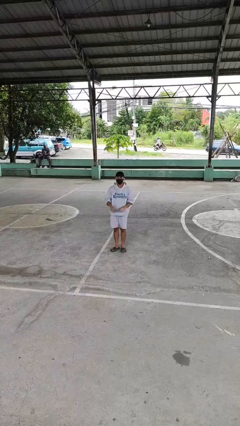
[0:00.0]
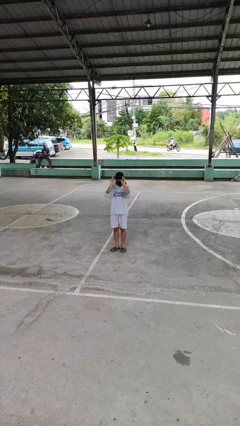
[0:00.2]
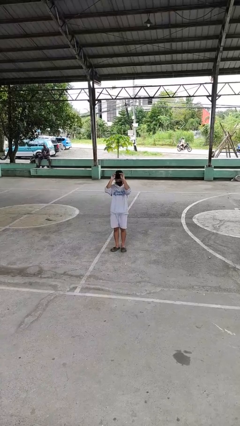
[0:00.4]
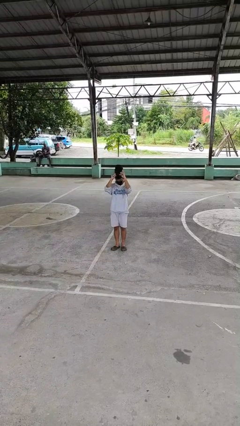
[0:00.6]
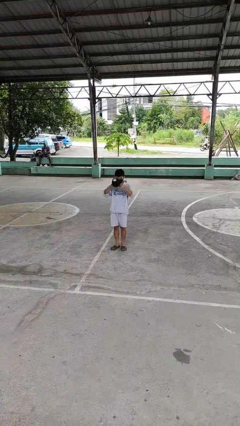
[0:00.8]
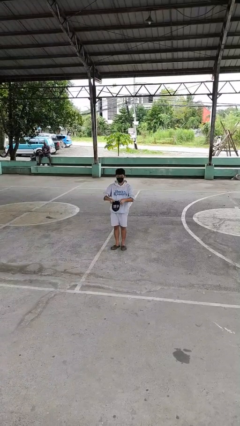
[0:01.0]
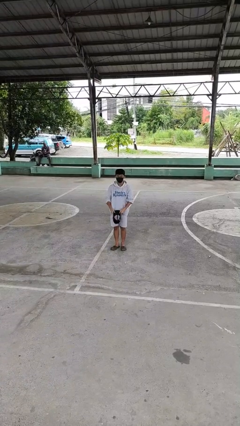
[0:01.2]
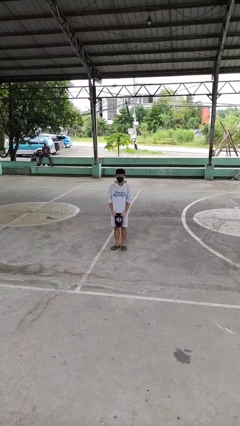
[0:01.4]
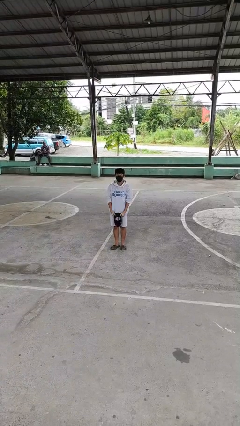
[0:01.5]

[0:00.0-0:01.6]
person takes off hat

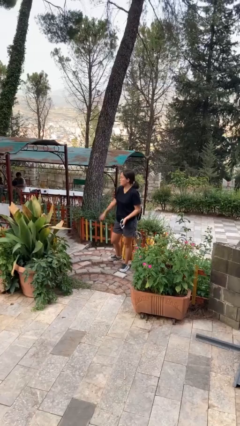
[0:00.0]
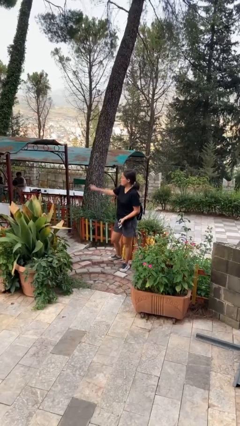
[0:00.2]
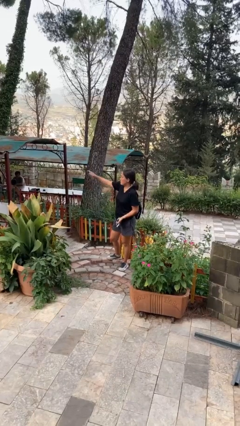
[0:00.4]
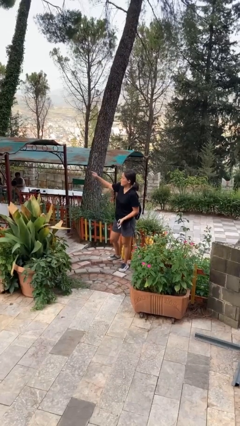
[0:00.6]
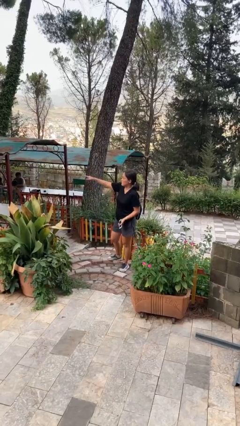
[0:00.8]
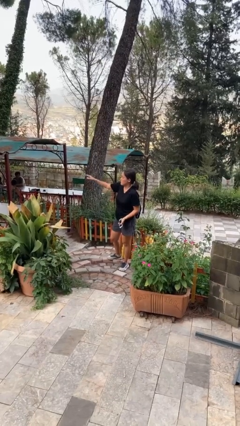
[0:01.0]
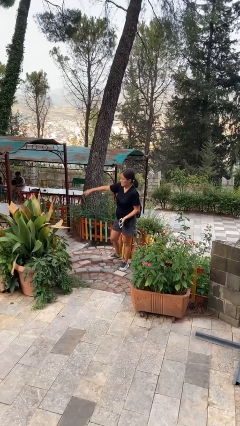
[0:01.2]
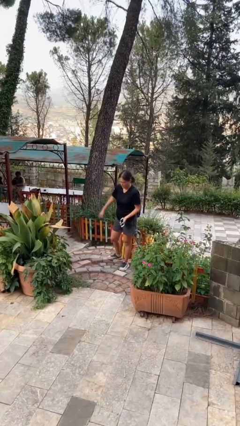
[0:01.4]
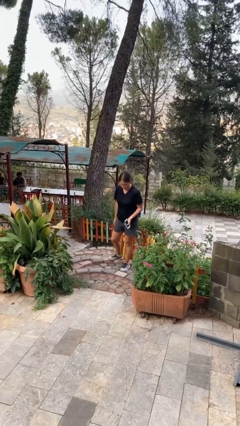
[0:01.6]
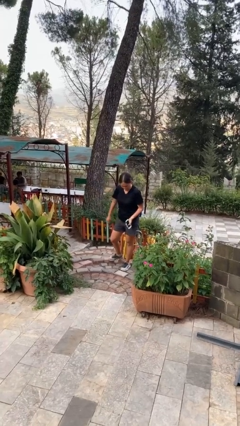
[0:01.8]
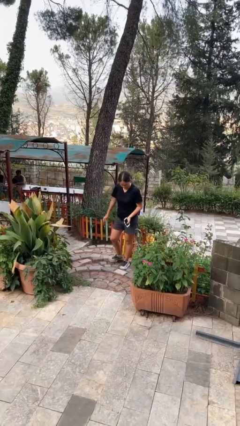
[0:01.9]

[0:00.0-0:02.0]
person points at person

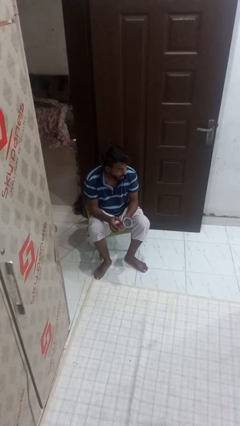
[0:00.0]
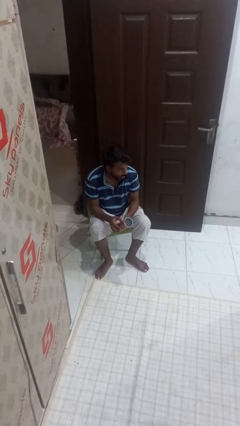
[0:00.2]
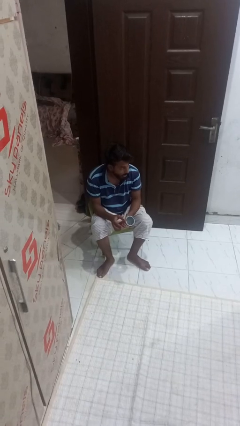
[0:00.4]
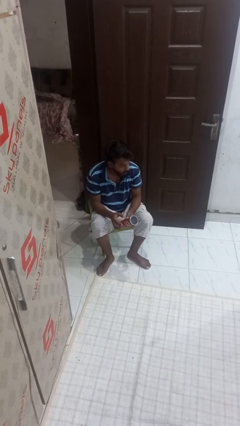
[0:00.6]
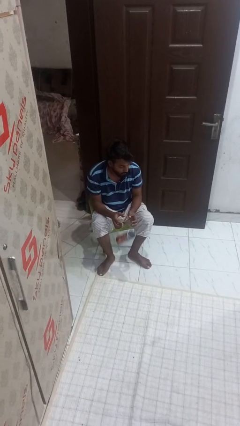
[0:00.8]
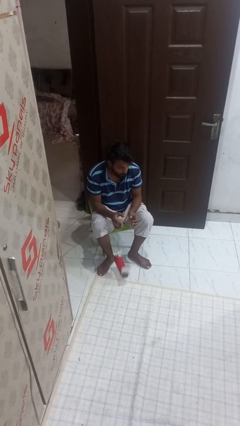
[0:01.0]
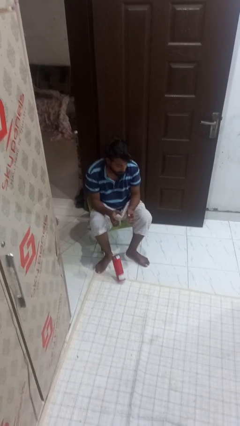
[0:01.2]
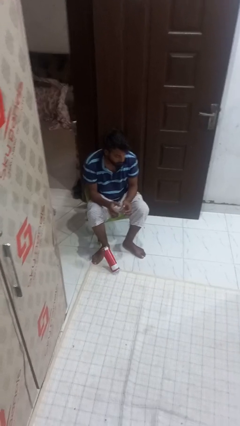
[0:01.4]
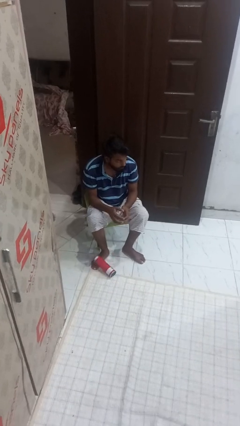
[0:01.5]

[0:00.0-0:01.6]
person drops object

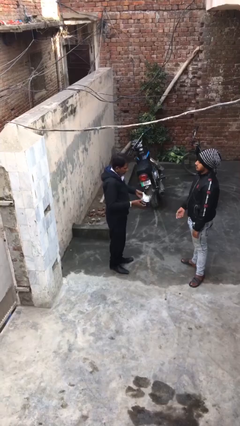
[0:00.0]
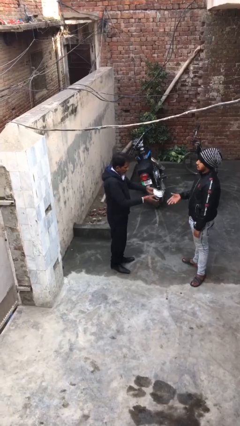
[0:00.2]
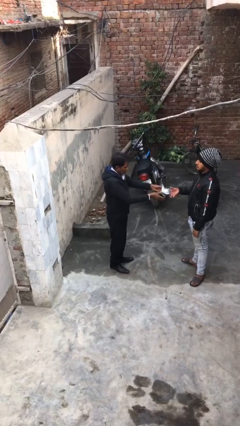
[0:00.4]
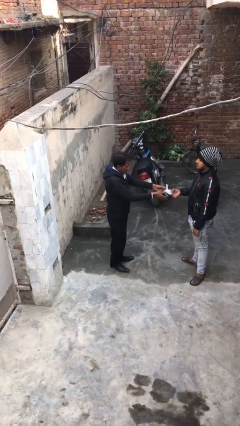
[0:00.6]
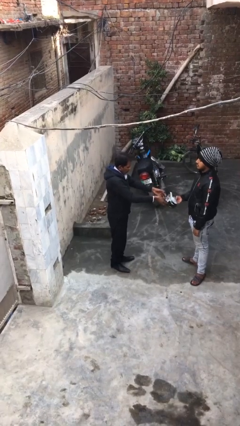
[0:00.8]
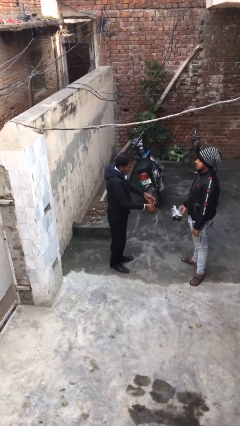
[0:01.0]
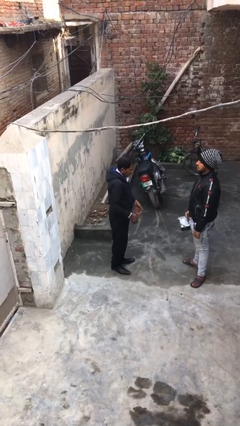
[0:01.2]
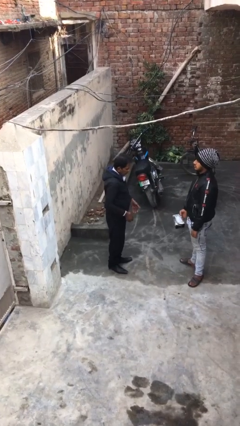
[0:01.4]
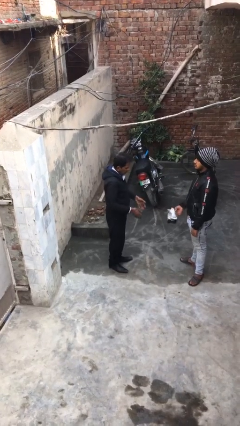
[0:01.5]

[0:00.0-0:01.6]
person transfers object to person

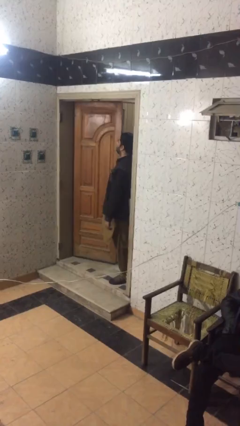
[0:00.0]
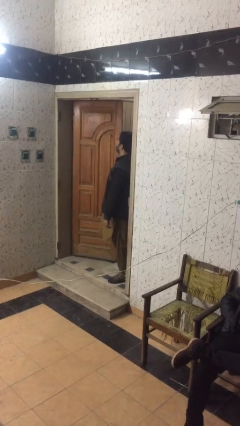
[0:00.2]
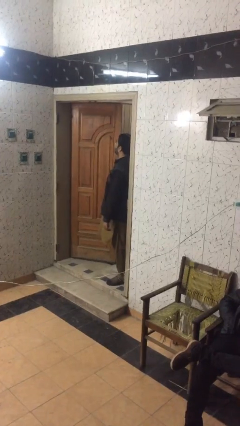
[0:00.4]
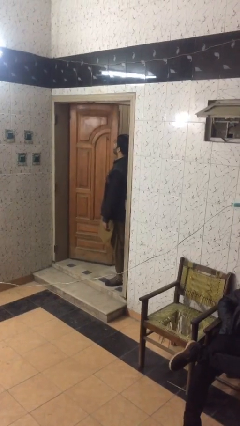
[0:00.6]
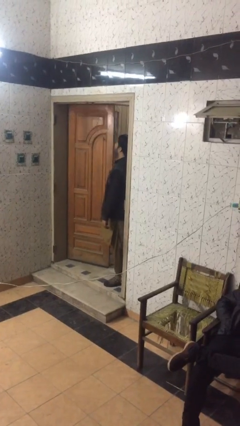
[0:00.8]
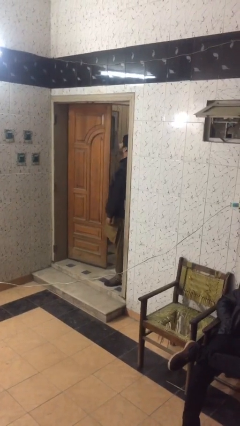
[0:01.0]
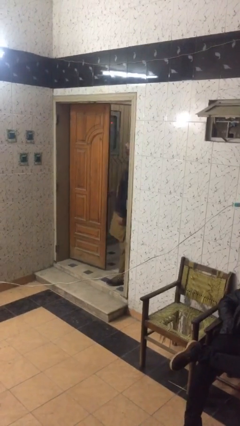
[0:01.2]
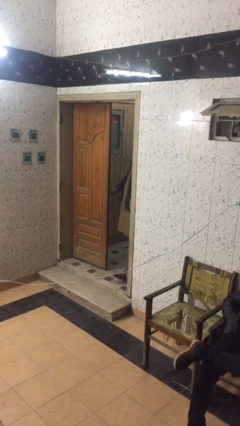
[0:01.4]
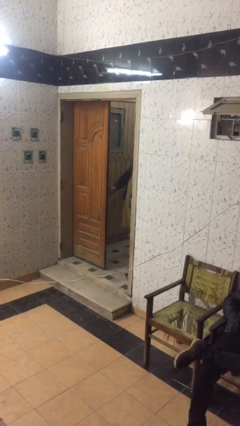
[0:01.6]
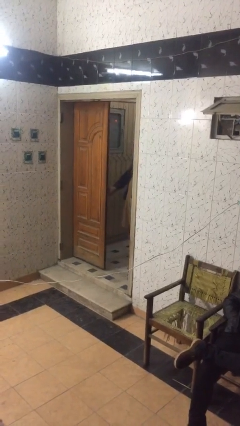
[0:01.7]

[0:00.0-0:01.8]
person closes facility door

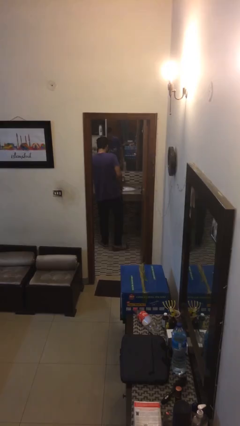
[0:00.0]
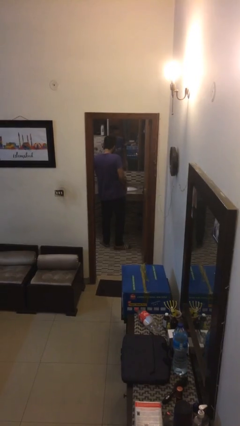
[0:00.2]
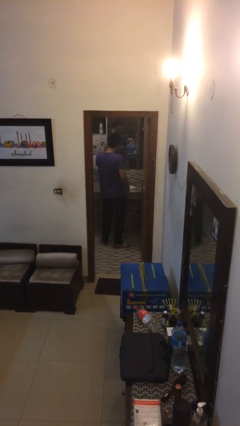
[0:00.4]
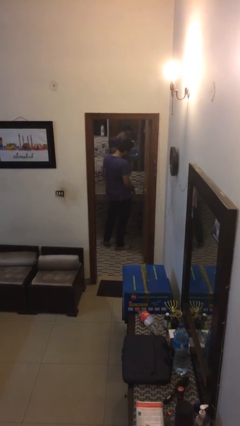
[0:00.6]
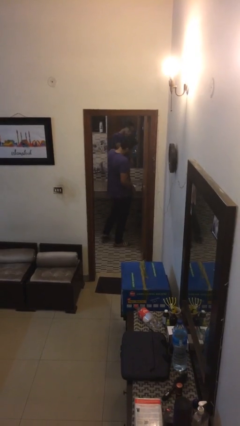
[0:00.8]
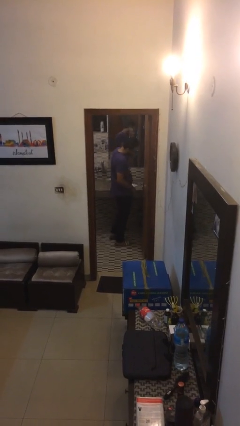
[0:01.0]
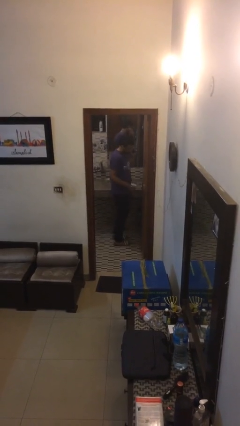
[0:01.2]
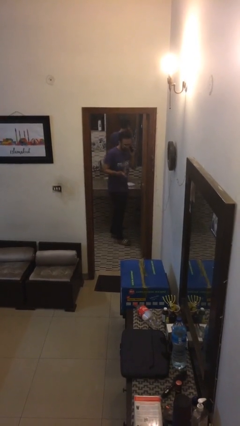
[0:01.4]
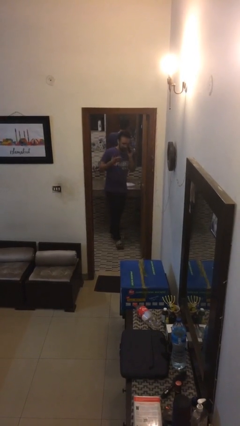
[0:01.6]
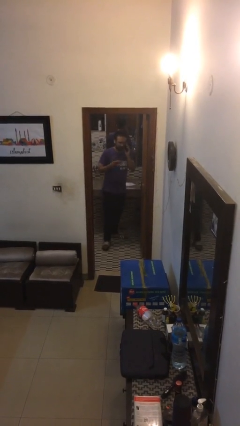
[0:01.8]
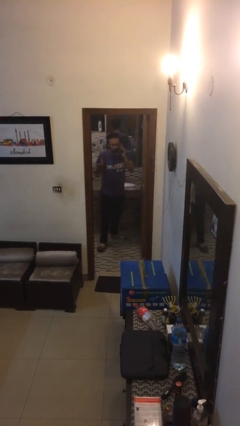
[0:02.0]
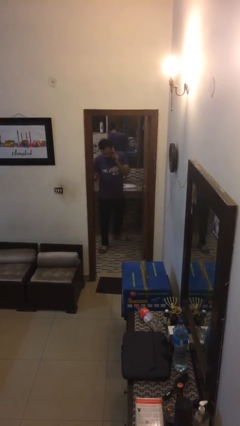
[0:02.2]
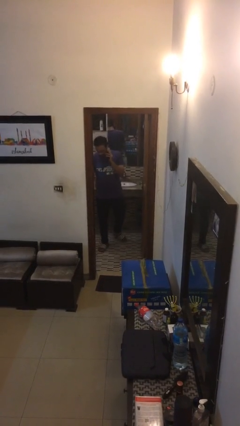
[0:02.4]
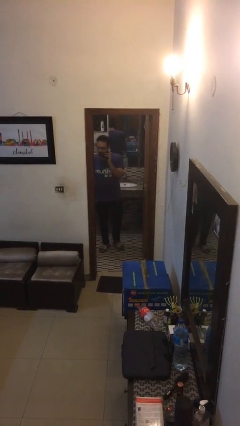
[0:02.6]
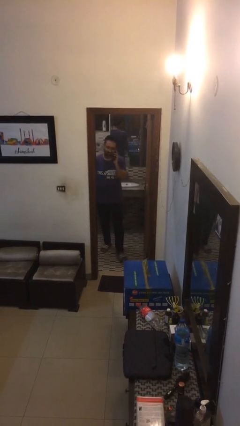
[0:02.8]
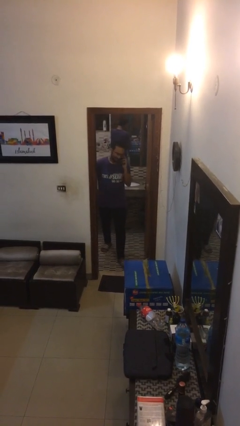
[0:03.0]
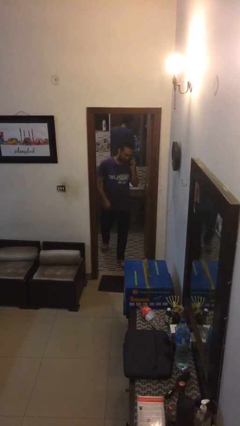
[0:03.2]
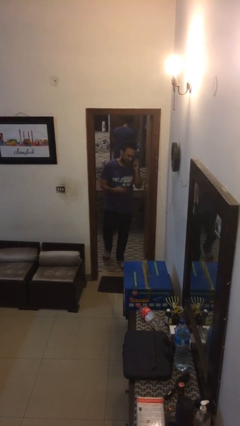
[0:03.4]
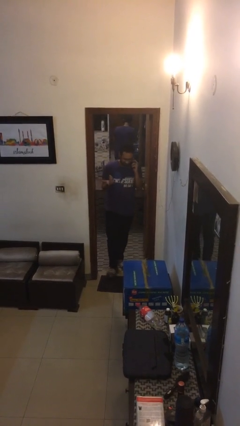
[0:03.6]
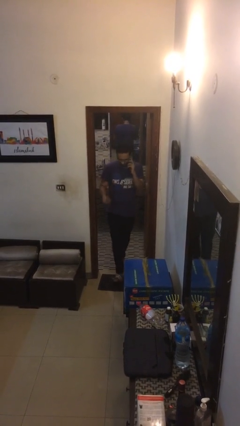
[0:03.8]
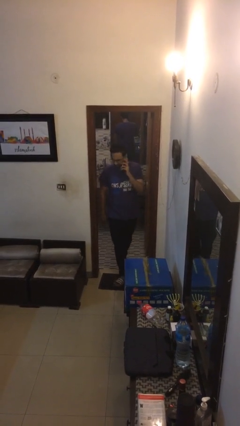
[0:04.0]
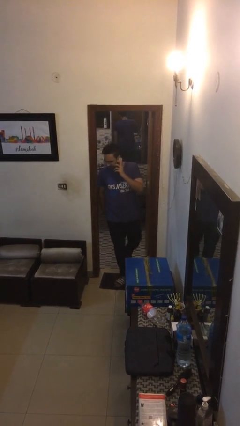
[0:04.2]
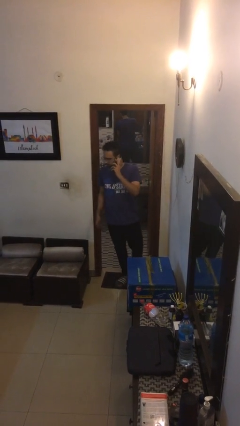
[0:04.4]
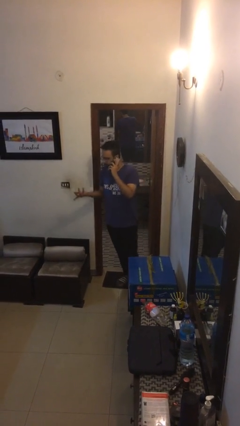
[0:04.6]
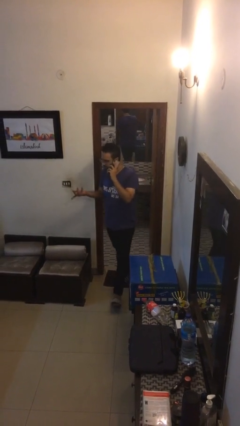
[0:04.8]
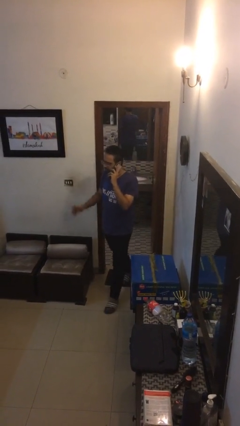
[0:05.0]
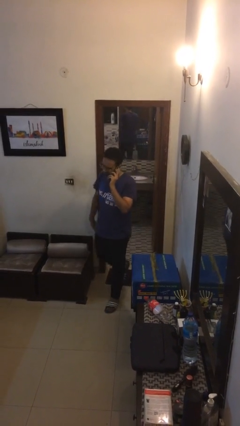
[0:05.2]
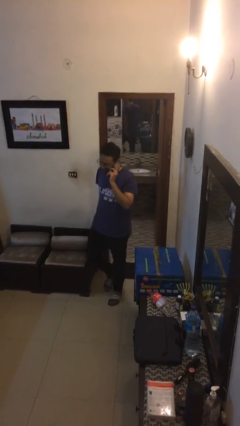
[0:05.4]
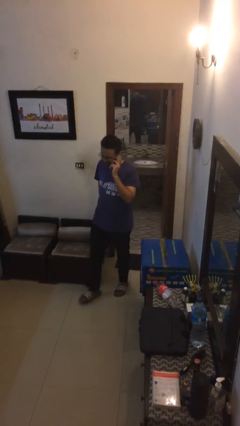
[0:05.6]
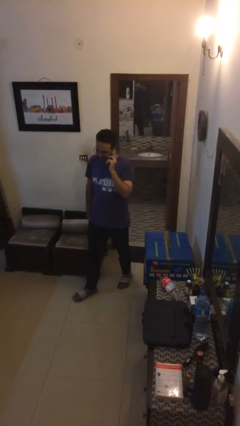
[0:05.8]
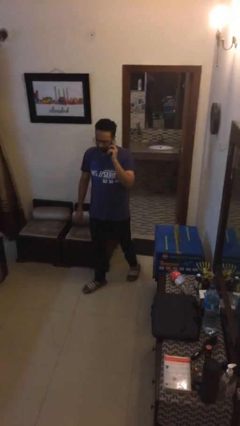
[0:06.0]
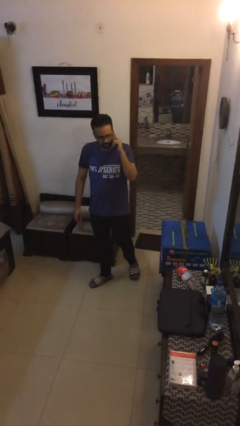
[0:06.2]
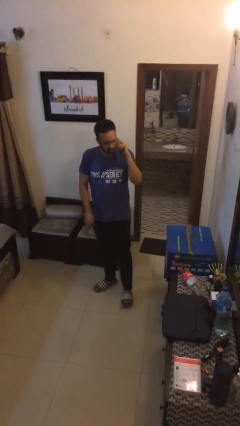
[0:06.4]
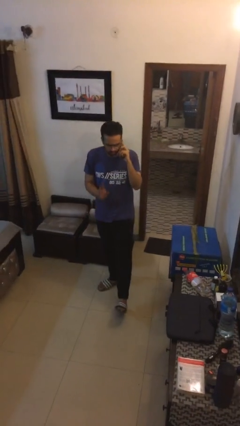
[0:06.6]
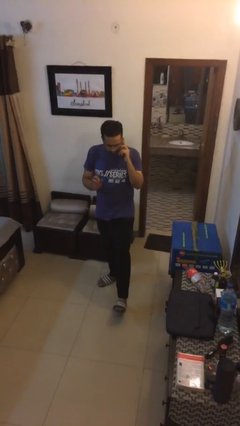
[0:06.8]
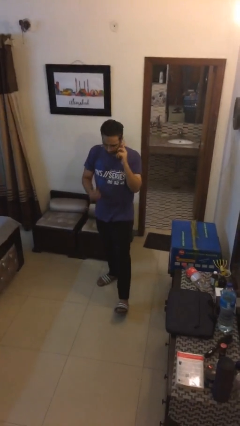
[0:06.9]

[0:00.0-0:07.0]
person enters scene through structure

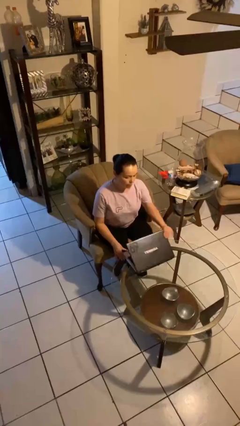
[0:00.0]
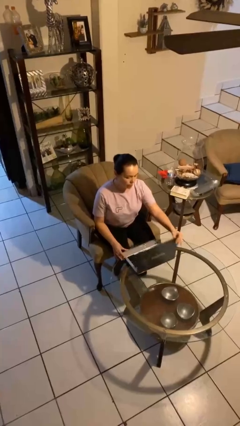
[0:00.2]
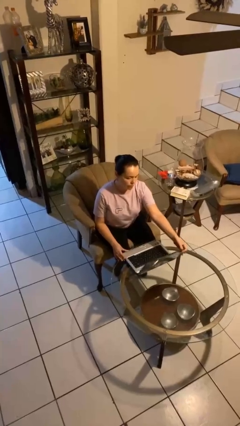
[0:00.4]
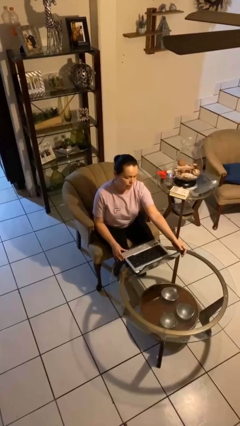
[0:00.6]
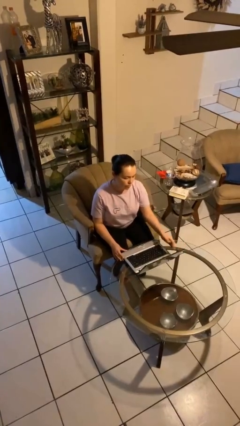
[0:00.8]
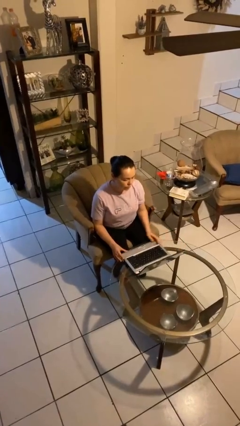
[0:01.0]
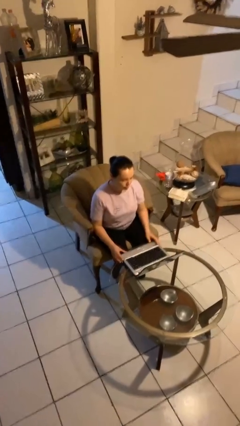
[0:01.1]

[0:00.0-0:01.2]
person opens laptop

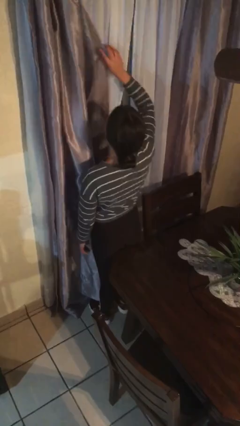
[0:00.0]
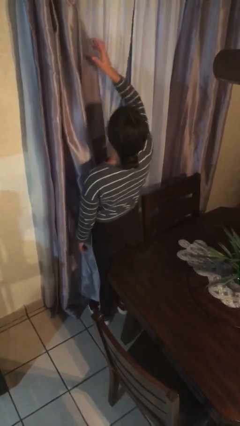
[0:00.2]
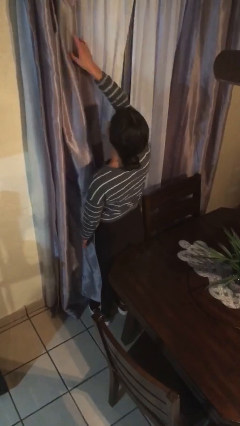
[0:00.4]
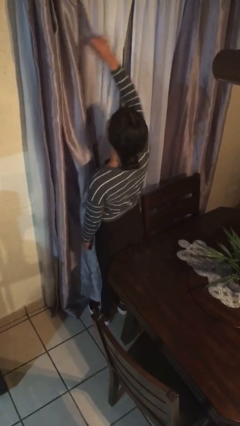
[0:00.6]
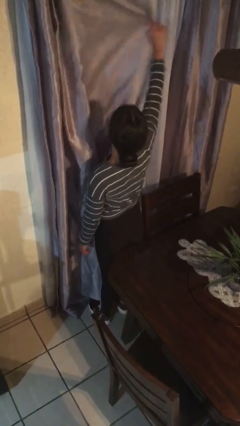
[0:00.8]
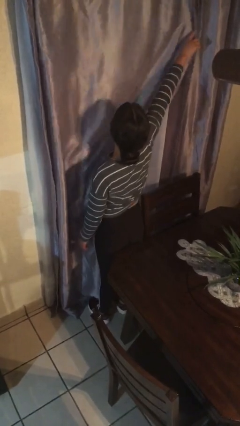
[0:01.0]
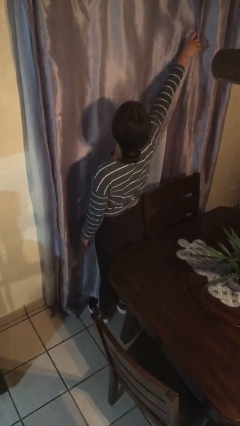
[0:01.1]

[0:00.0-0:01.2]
person closes curtains
